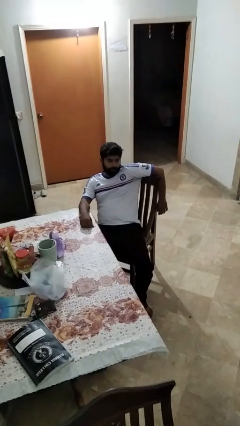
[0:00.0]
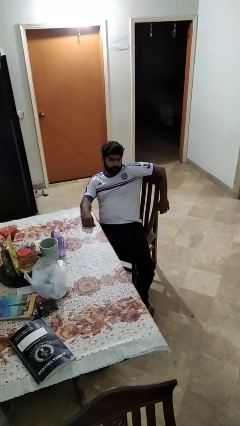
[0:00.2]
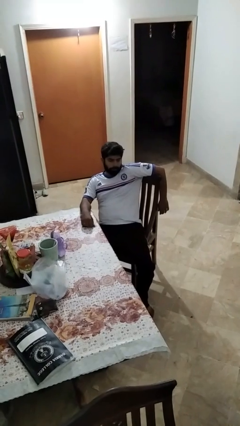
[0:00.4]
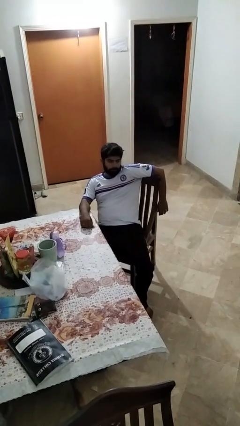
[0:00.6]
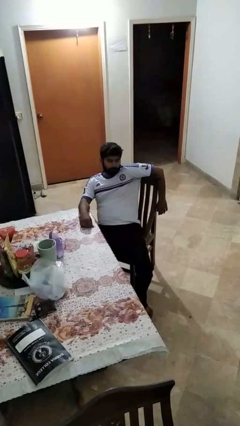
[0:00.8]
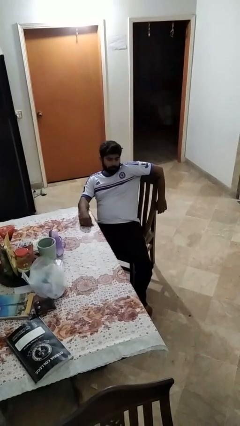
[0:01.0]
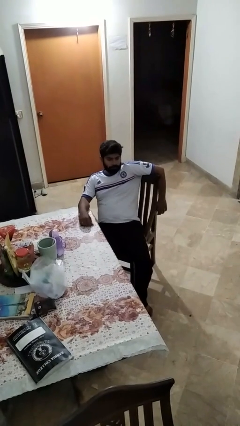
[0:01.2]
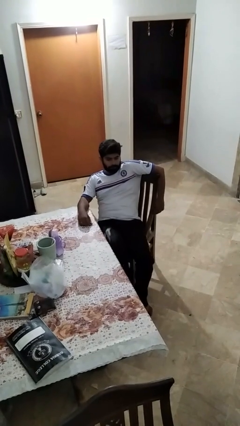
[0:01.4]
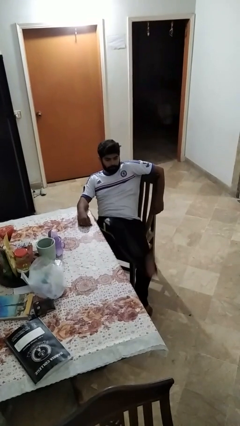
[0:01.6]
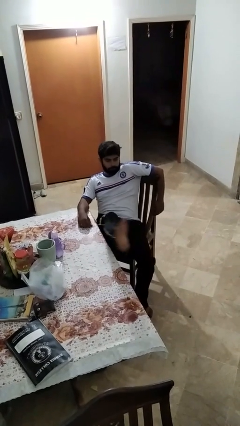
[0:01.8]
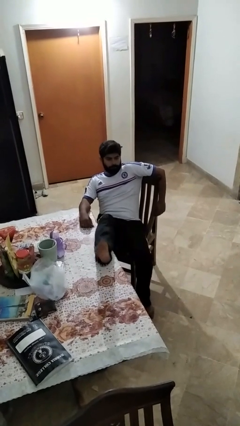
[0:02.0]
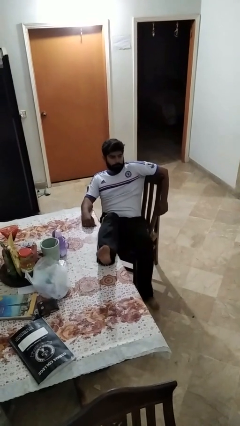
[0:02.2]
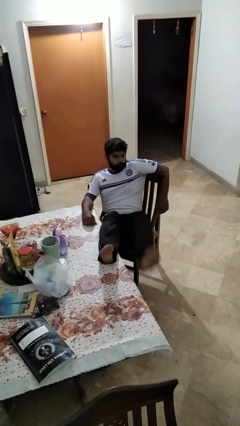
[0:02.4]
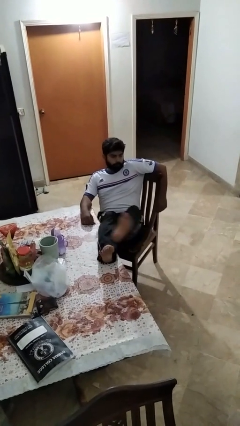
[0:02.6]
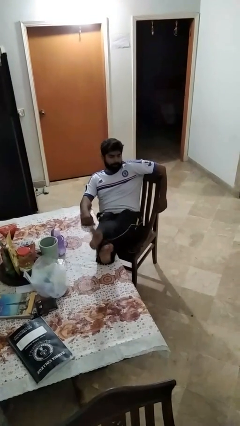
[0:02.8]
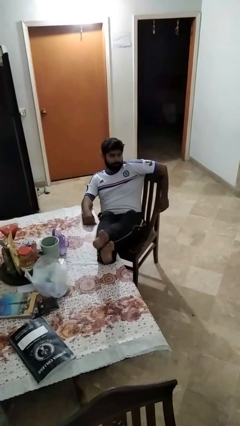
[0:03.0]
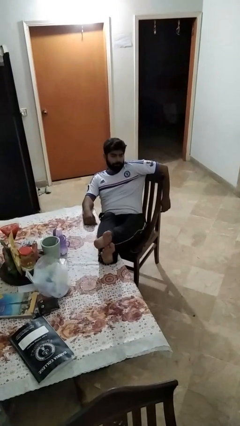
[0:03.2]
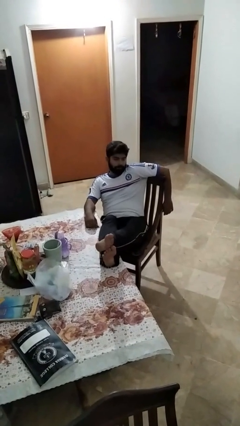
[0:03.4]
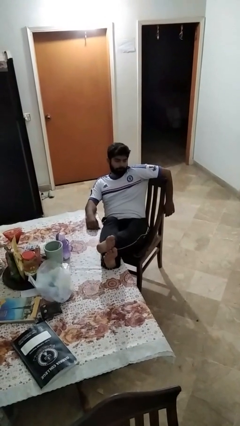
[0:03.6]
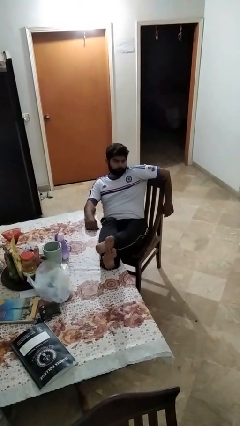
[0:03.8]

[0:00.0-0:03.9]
person puts feet up

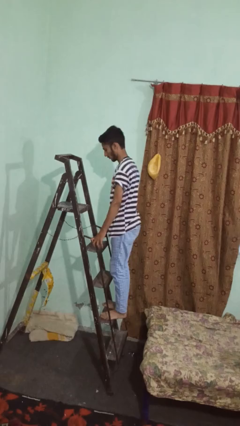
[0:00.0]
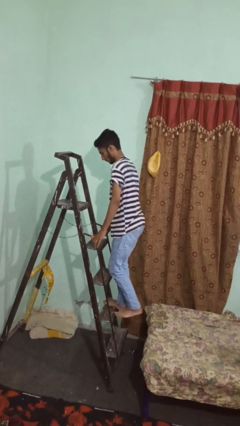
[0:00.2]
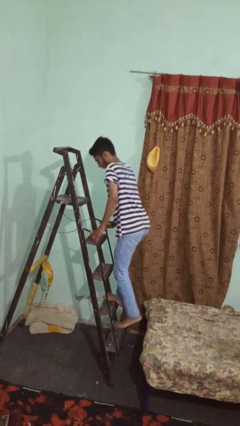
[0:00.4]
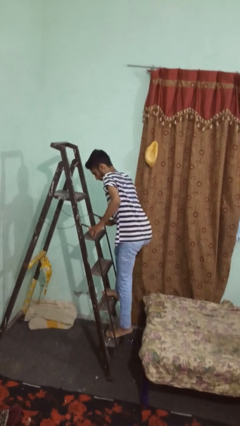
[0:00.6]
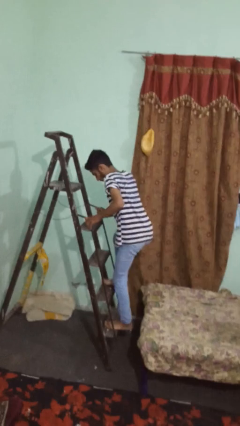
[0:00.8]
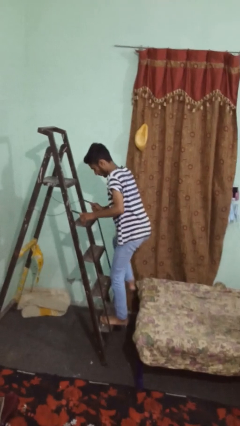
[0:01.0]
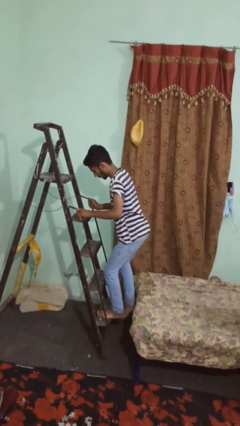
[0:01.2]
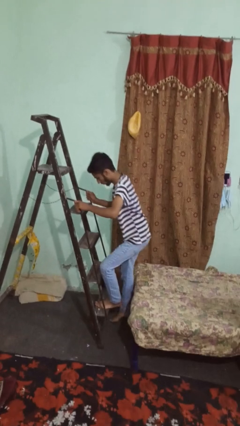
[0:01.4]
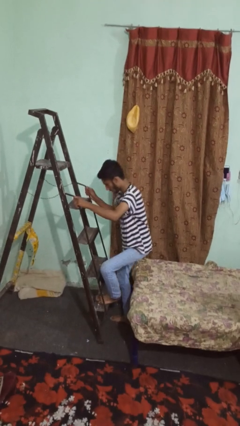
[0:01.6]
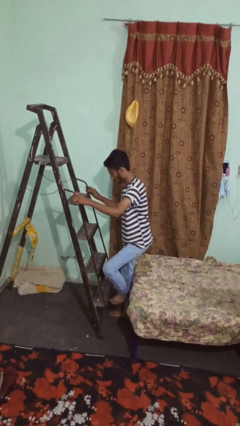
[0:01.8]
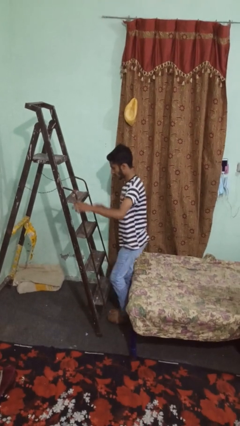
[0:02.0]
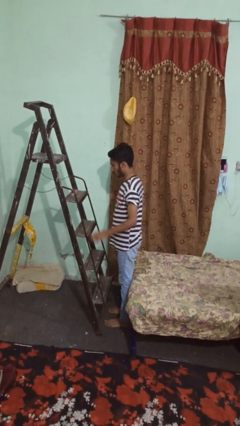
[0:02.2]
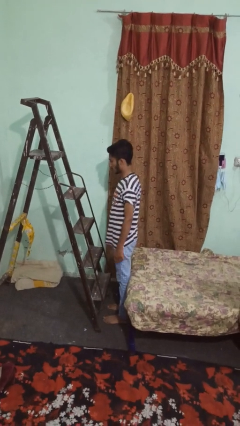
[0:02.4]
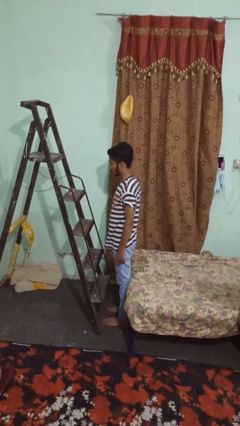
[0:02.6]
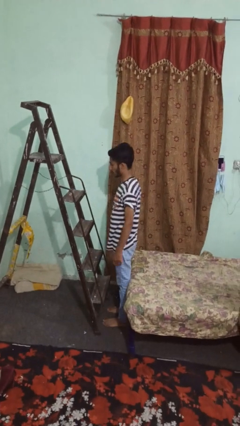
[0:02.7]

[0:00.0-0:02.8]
person climbs down ladder

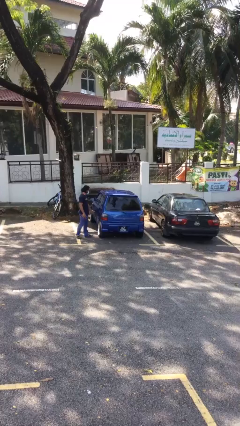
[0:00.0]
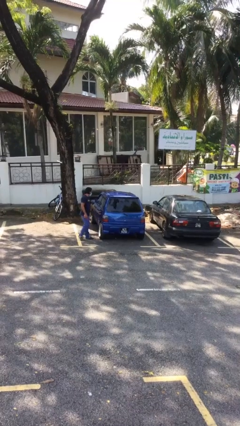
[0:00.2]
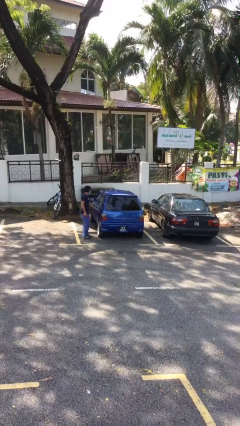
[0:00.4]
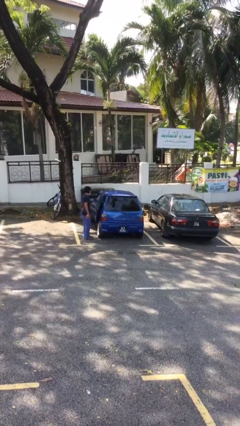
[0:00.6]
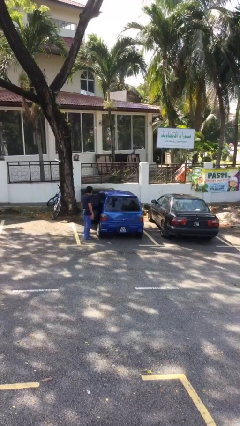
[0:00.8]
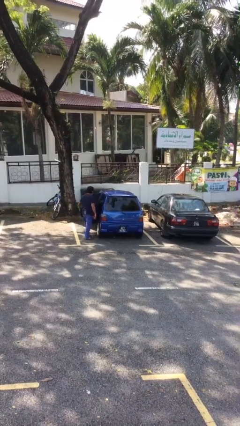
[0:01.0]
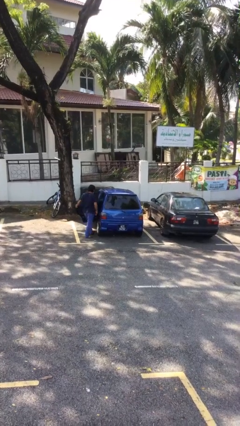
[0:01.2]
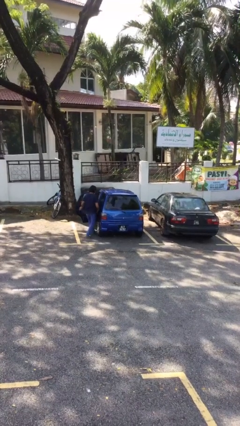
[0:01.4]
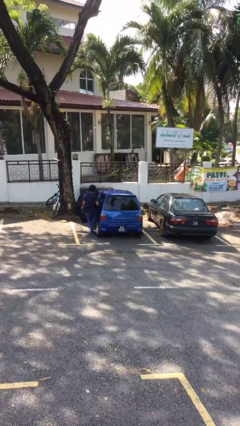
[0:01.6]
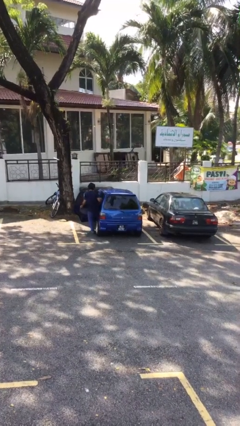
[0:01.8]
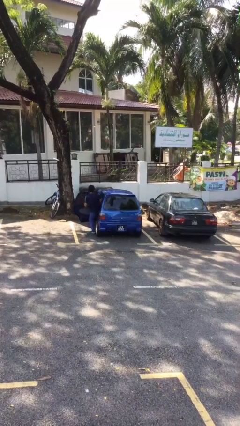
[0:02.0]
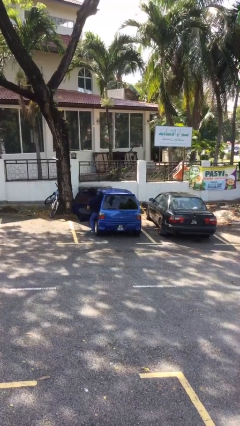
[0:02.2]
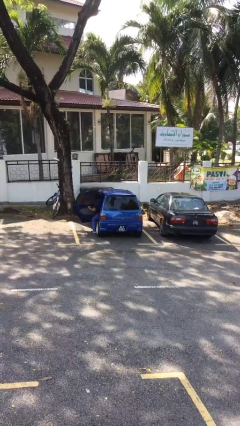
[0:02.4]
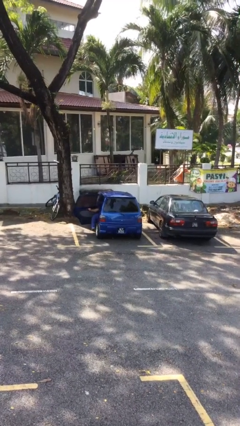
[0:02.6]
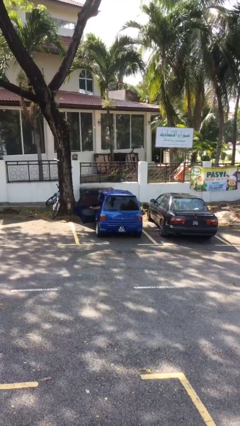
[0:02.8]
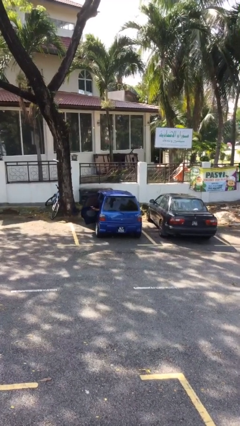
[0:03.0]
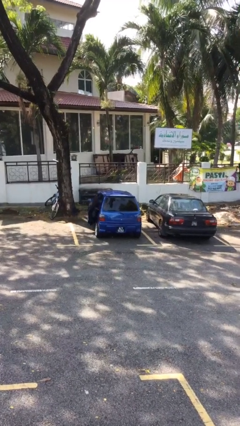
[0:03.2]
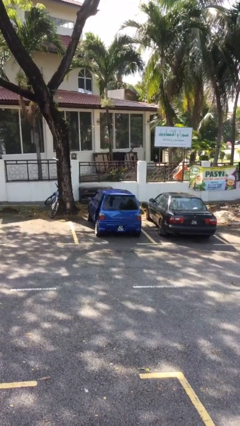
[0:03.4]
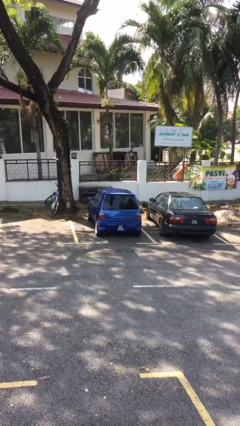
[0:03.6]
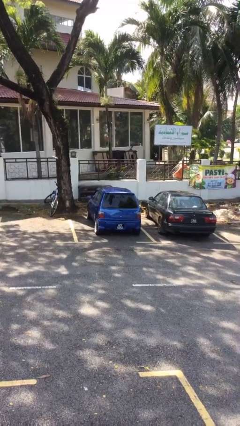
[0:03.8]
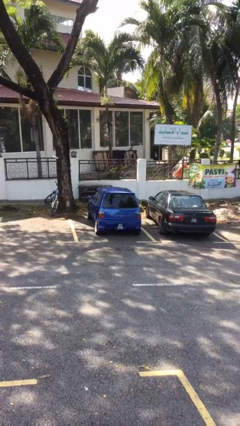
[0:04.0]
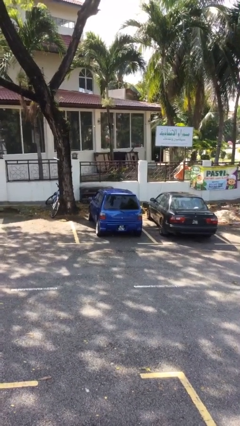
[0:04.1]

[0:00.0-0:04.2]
car picks up person

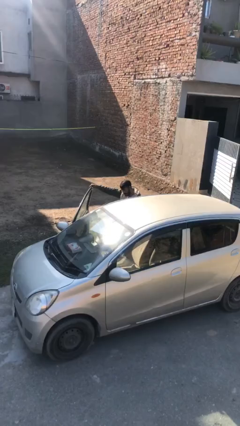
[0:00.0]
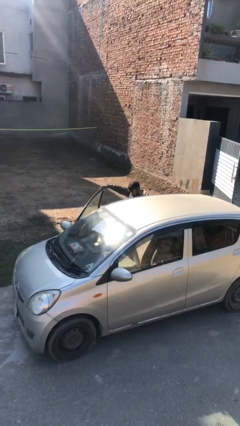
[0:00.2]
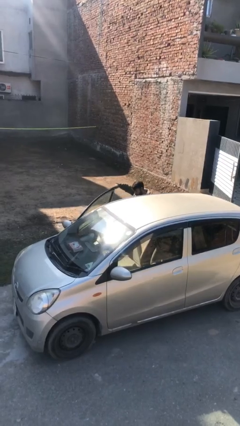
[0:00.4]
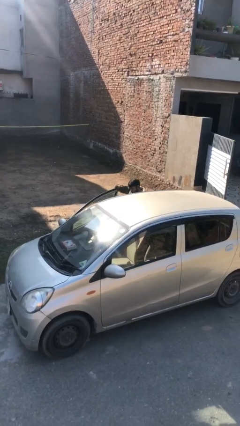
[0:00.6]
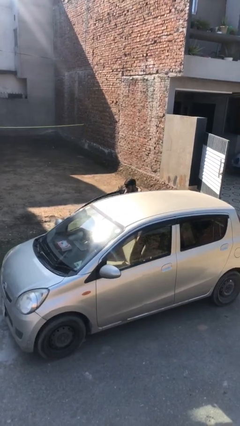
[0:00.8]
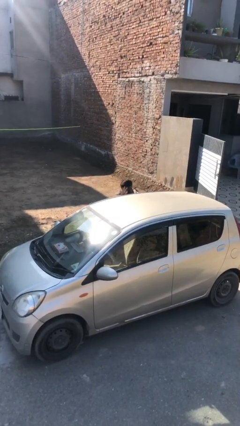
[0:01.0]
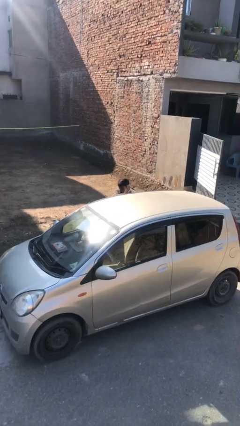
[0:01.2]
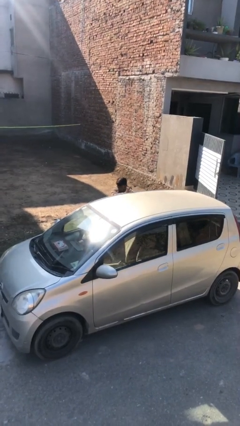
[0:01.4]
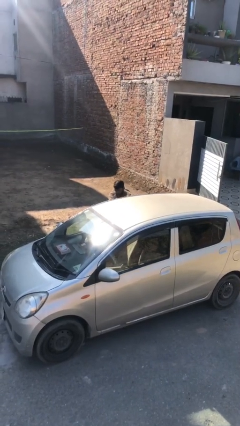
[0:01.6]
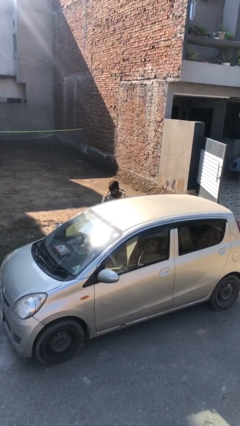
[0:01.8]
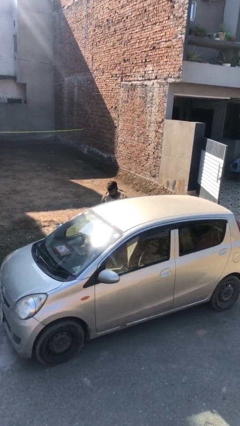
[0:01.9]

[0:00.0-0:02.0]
person closes car door

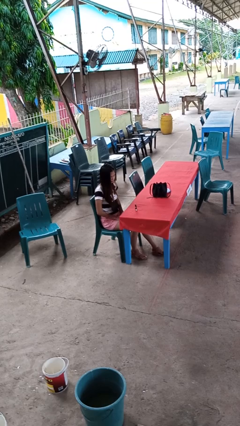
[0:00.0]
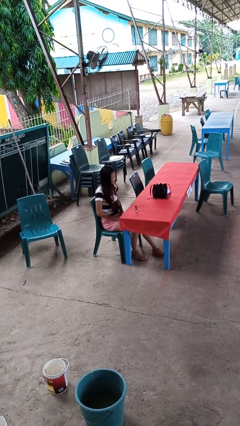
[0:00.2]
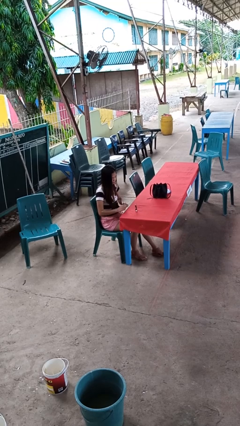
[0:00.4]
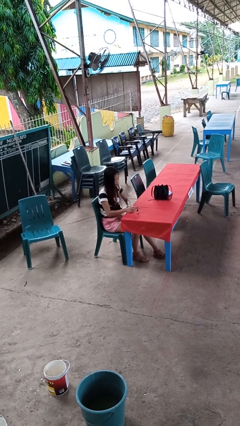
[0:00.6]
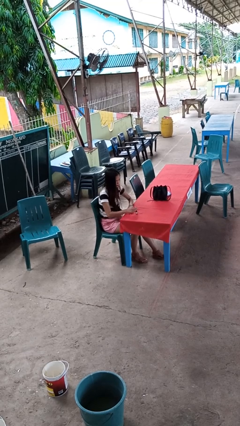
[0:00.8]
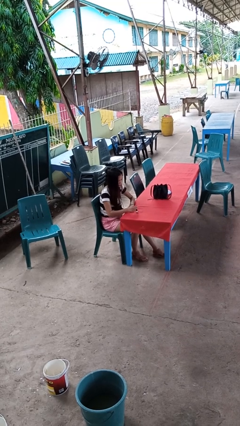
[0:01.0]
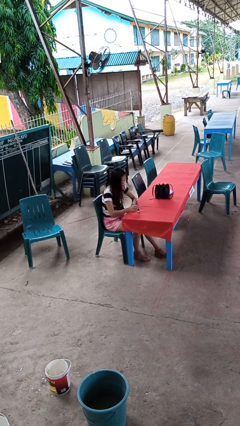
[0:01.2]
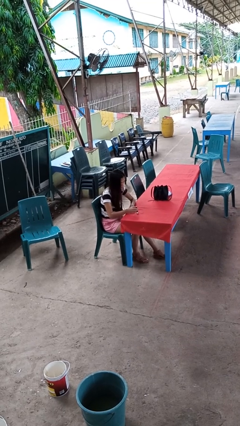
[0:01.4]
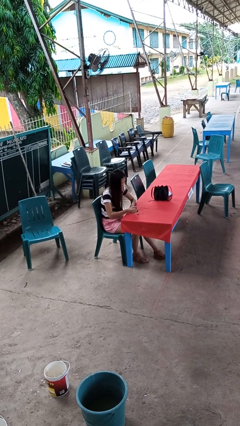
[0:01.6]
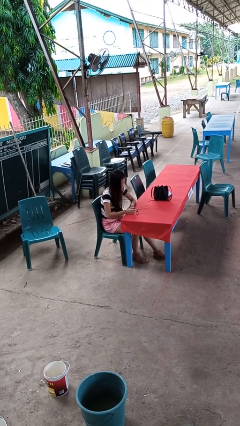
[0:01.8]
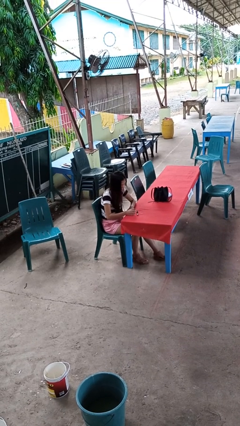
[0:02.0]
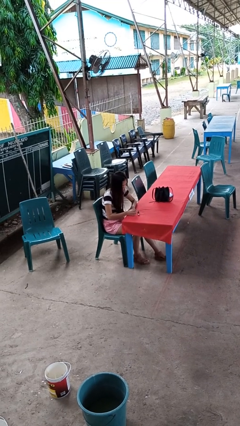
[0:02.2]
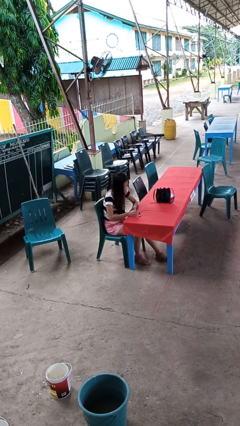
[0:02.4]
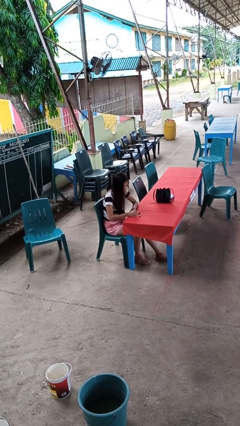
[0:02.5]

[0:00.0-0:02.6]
person paints fingernails

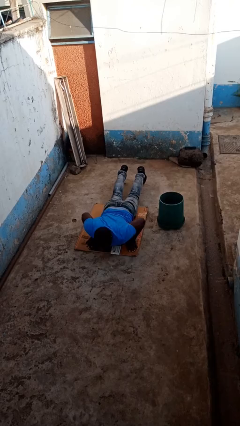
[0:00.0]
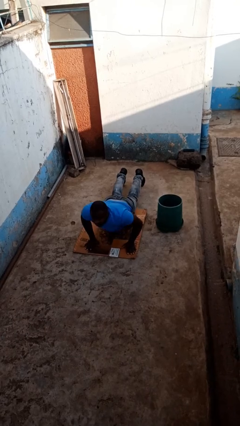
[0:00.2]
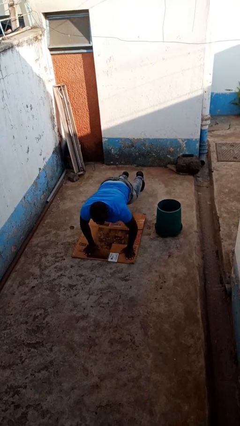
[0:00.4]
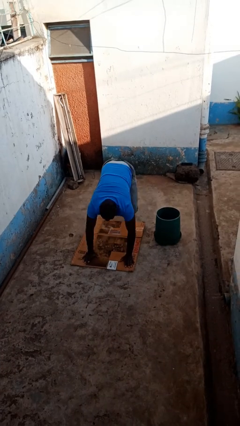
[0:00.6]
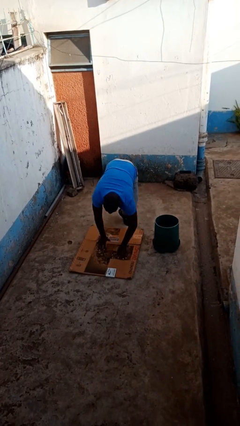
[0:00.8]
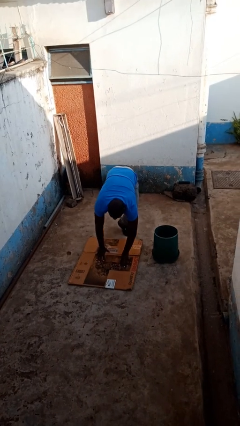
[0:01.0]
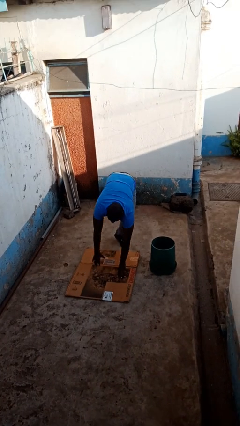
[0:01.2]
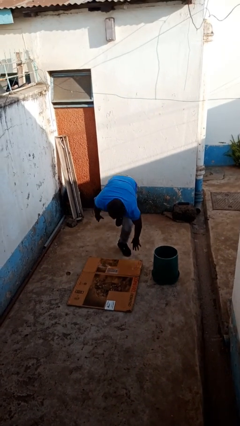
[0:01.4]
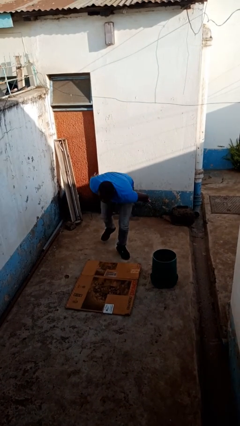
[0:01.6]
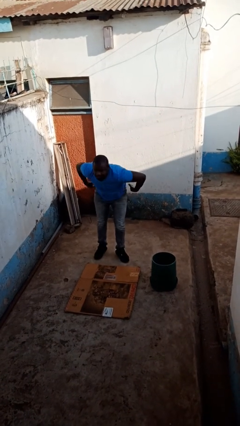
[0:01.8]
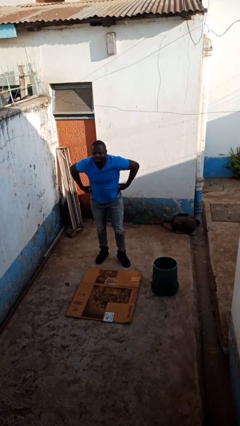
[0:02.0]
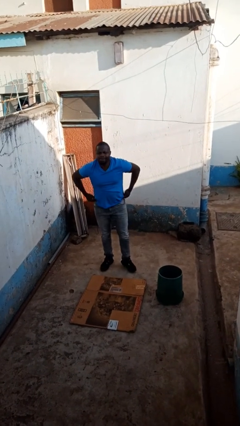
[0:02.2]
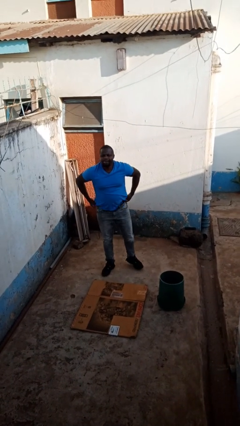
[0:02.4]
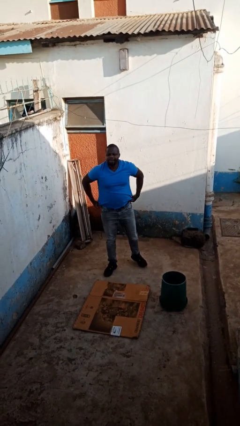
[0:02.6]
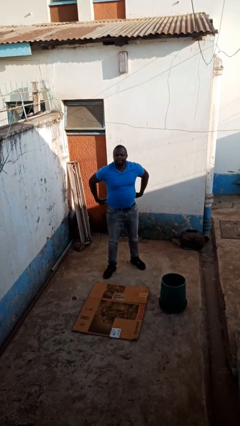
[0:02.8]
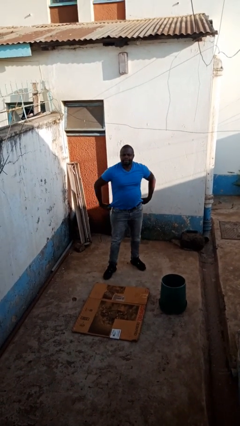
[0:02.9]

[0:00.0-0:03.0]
person stands up from floor
